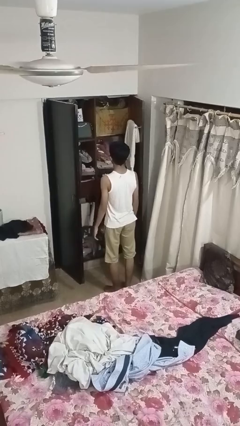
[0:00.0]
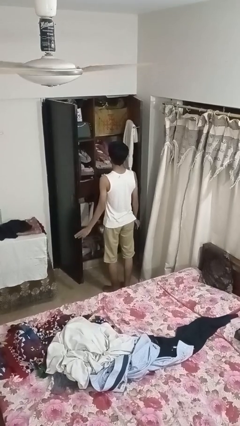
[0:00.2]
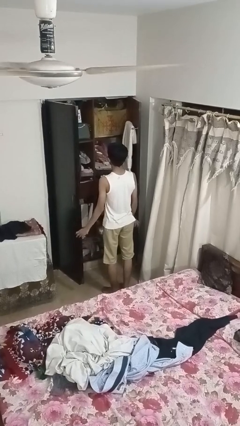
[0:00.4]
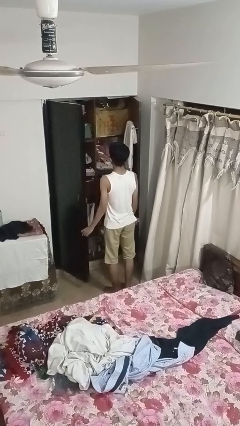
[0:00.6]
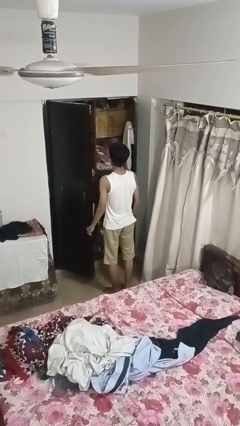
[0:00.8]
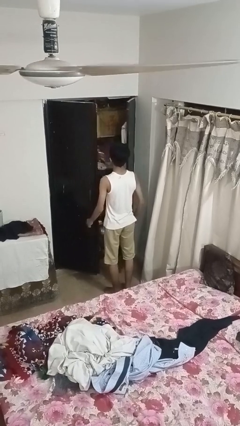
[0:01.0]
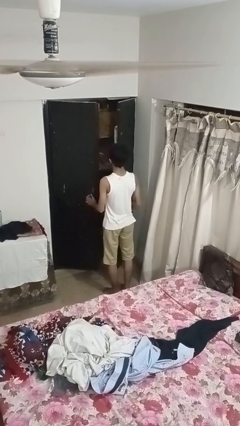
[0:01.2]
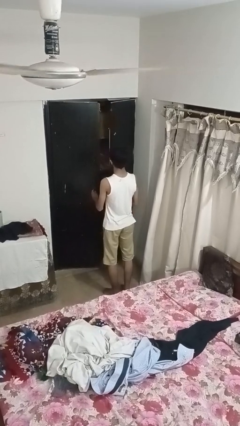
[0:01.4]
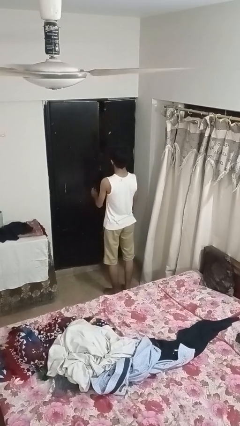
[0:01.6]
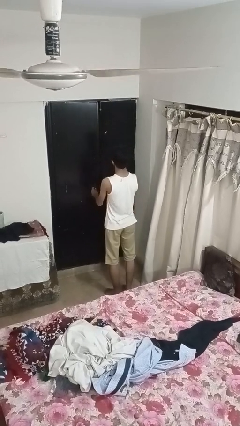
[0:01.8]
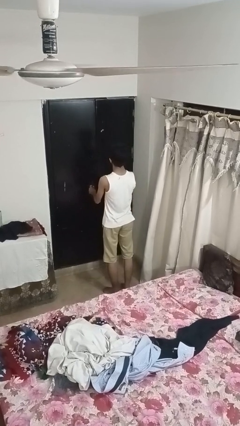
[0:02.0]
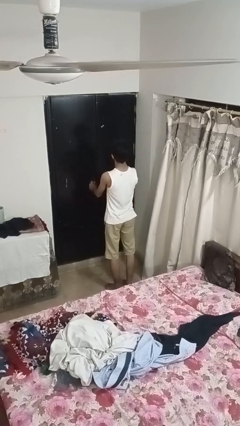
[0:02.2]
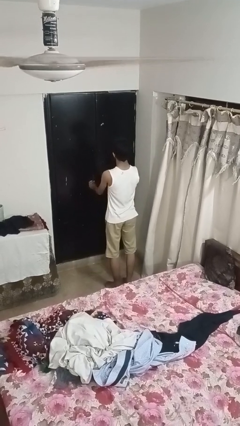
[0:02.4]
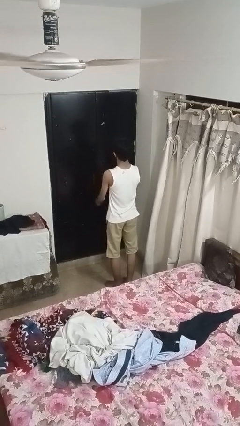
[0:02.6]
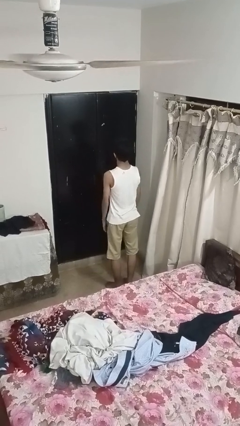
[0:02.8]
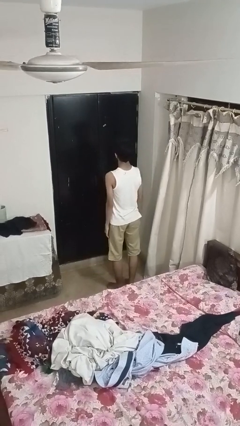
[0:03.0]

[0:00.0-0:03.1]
person closes closet door

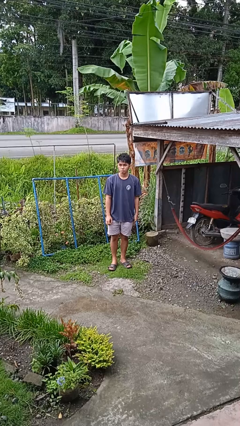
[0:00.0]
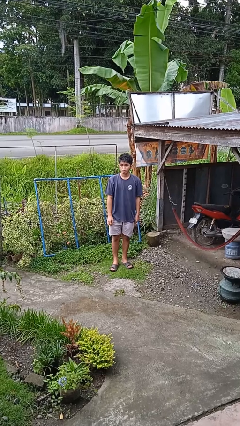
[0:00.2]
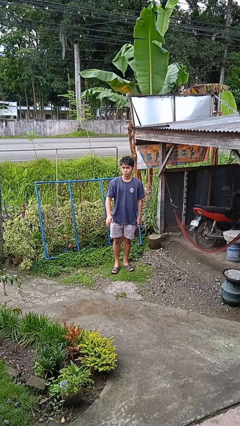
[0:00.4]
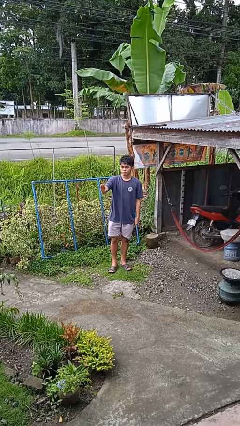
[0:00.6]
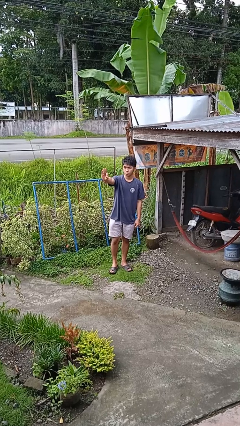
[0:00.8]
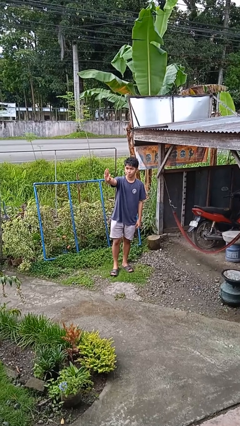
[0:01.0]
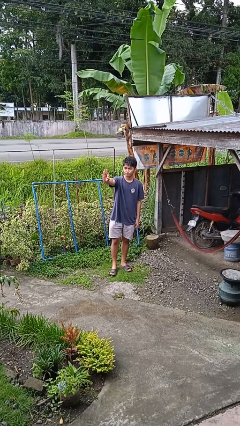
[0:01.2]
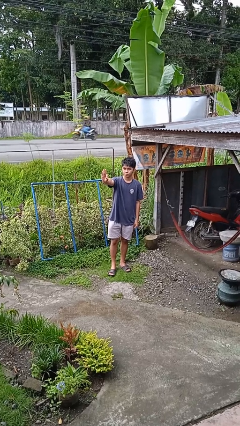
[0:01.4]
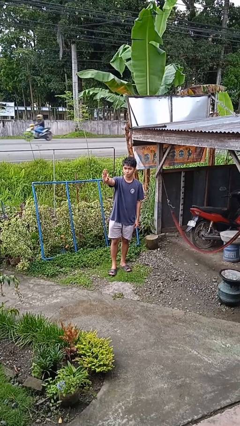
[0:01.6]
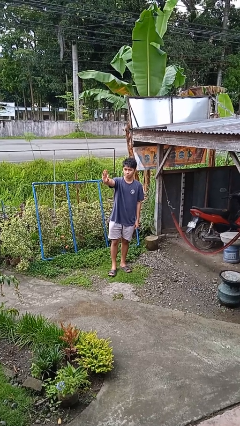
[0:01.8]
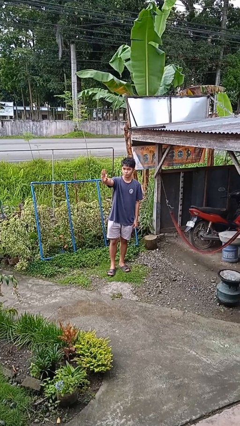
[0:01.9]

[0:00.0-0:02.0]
person gestures number three

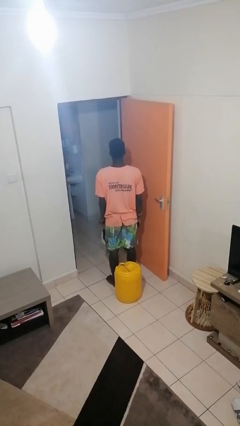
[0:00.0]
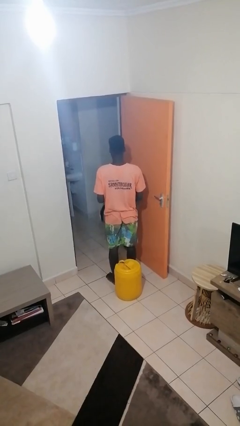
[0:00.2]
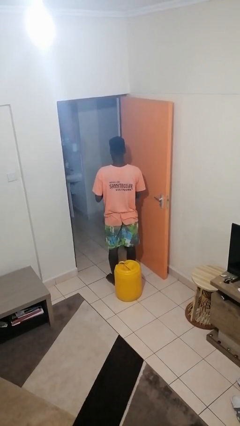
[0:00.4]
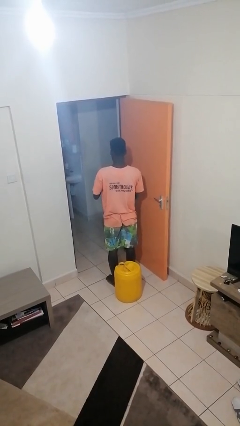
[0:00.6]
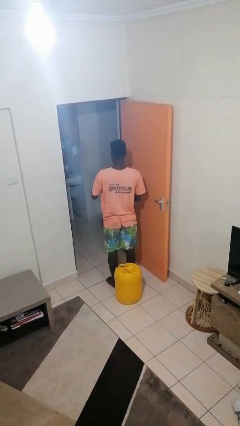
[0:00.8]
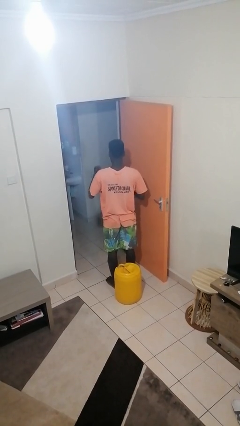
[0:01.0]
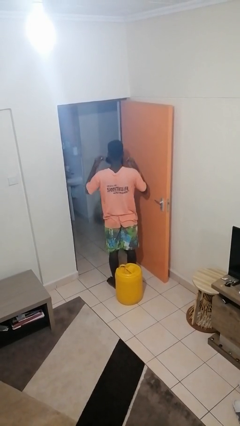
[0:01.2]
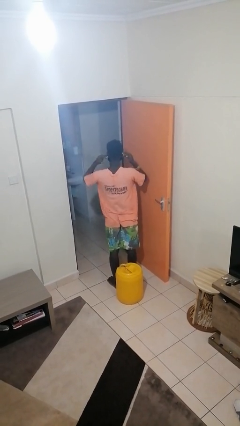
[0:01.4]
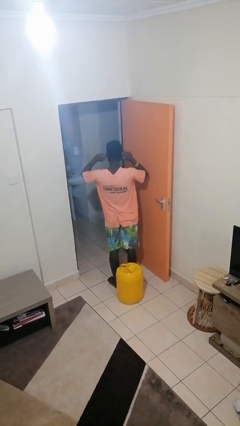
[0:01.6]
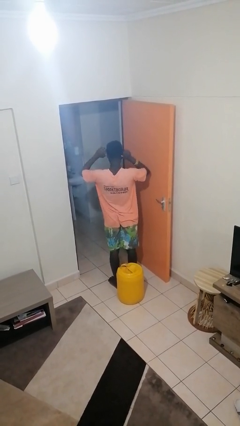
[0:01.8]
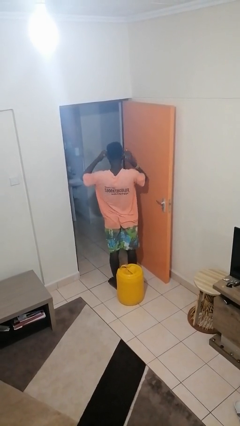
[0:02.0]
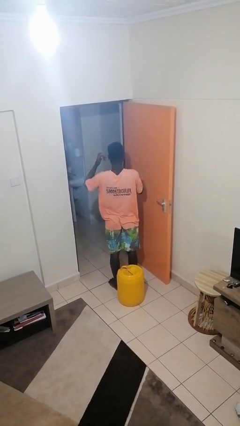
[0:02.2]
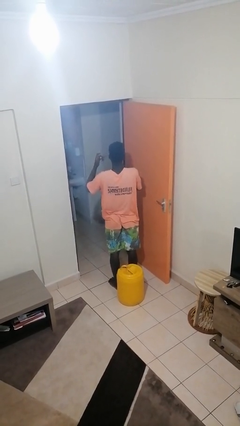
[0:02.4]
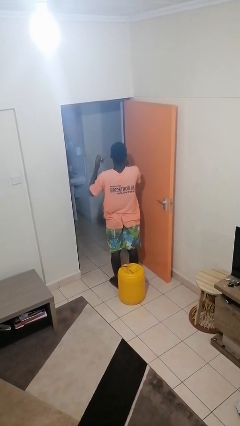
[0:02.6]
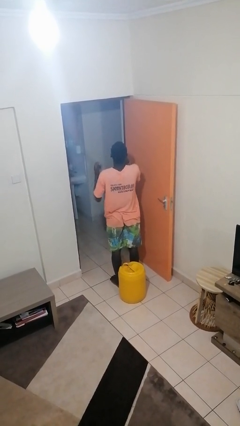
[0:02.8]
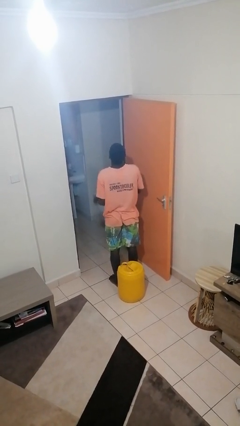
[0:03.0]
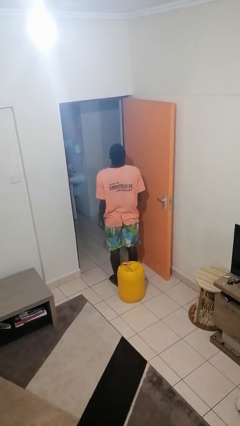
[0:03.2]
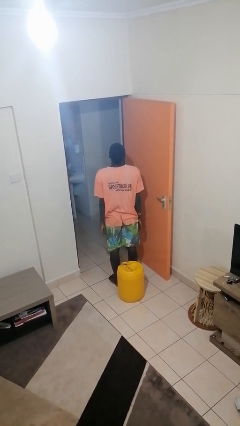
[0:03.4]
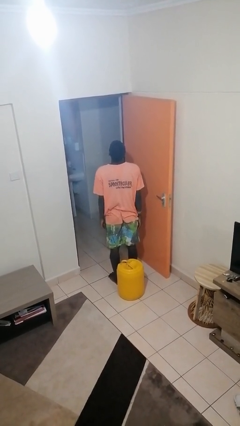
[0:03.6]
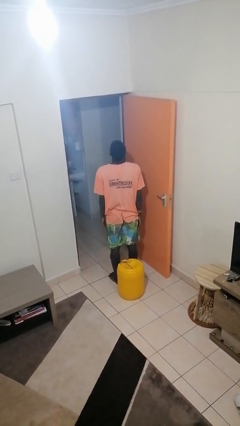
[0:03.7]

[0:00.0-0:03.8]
person puts on facemask

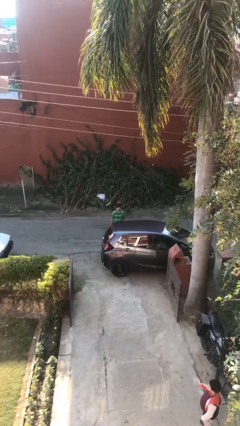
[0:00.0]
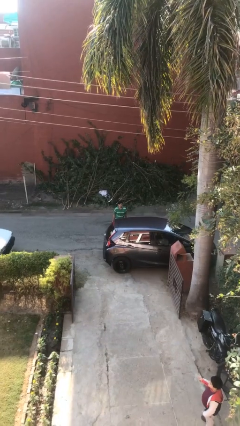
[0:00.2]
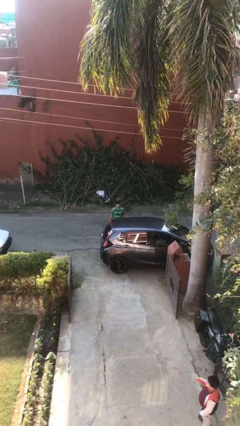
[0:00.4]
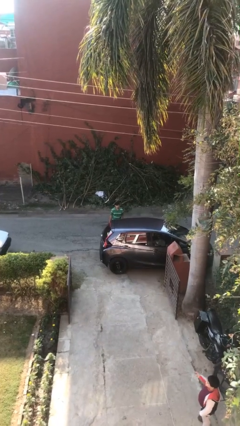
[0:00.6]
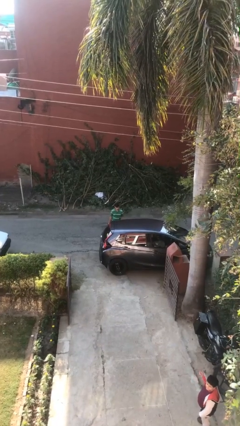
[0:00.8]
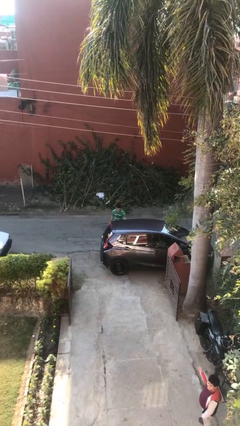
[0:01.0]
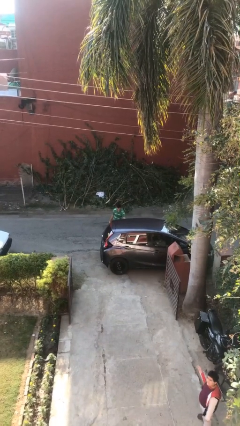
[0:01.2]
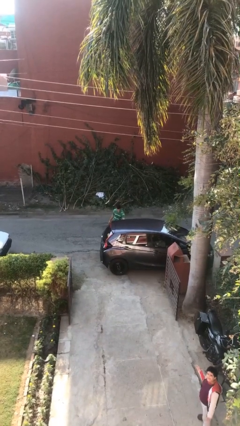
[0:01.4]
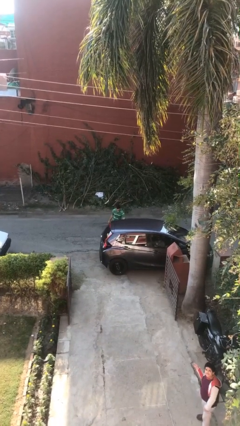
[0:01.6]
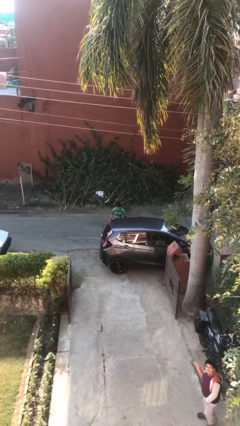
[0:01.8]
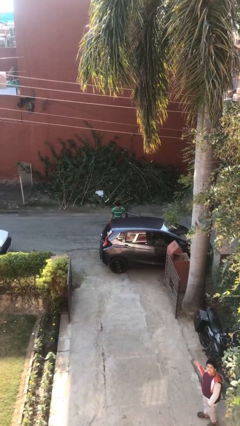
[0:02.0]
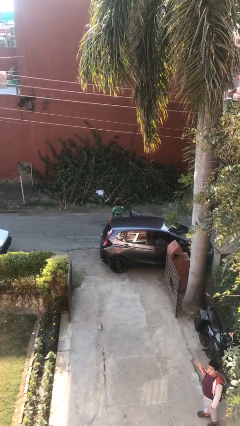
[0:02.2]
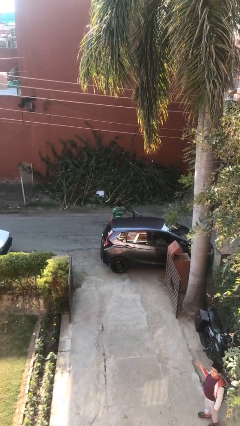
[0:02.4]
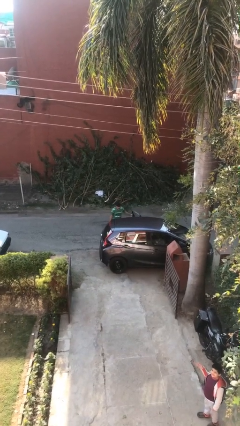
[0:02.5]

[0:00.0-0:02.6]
person opens car door

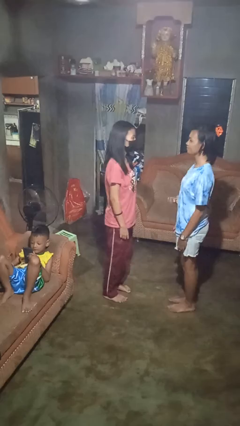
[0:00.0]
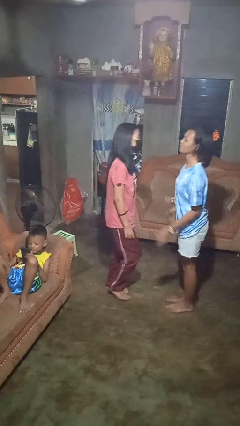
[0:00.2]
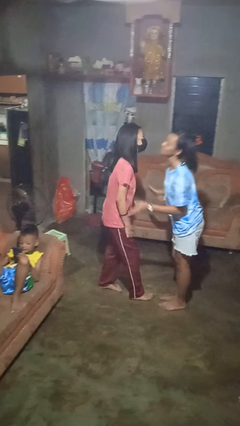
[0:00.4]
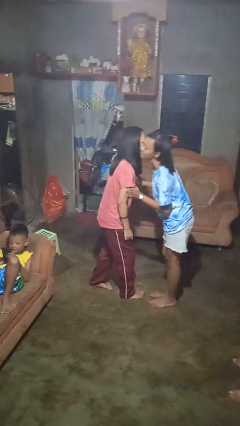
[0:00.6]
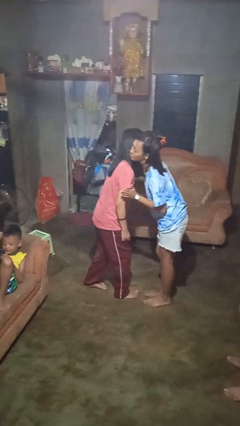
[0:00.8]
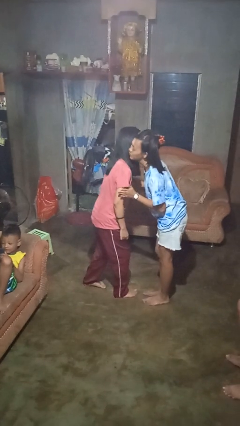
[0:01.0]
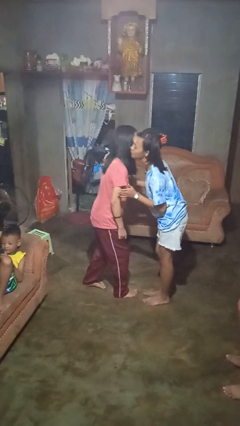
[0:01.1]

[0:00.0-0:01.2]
person kisses cheek of person

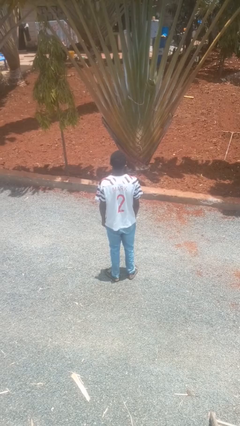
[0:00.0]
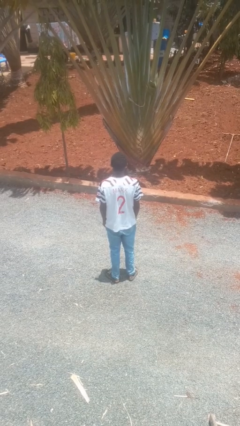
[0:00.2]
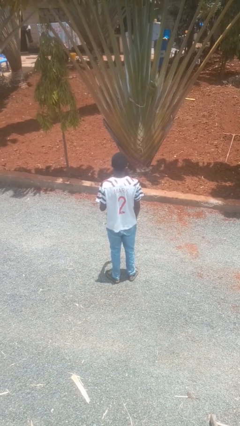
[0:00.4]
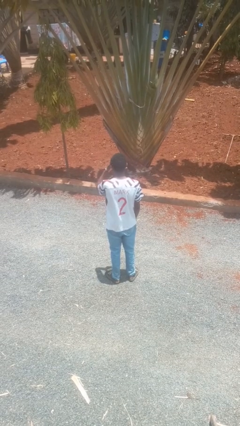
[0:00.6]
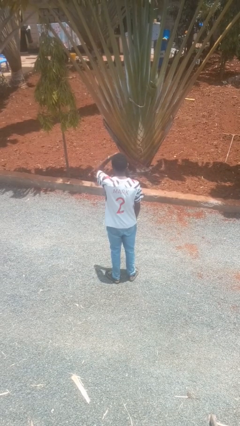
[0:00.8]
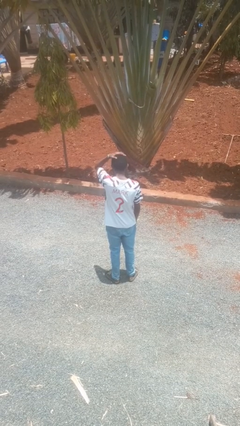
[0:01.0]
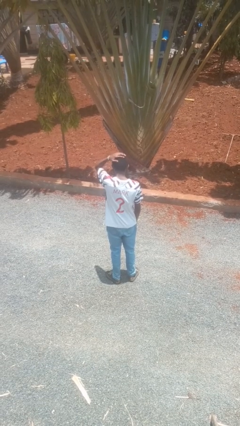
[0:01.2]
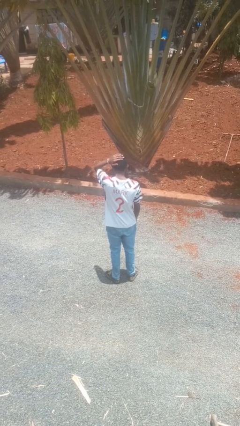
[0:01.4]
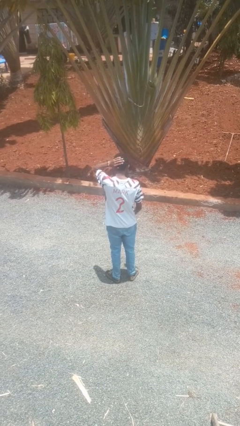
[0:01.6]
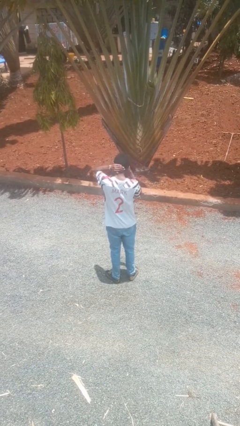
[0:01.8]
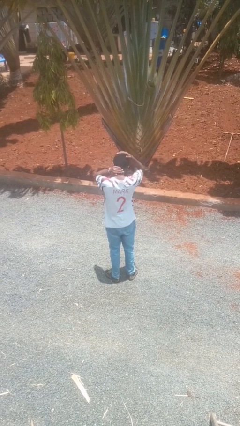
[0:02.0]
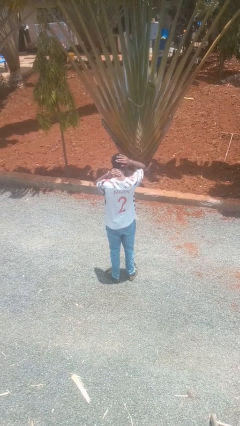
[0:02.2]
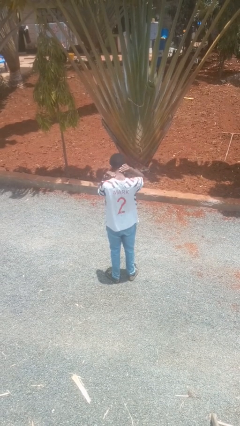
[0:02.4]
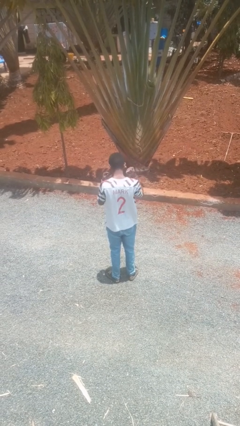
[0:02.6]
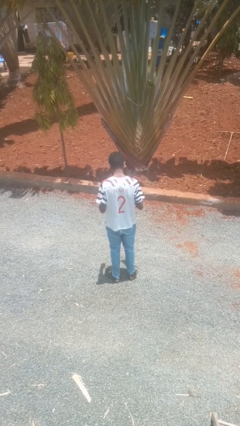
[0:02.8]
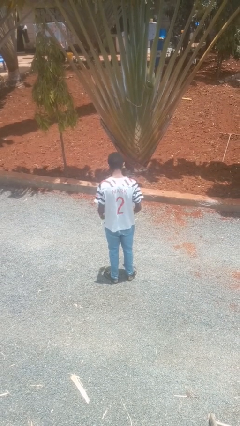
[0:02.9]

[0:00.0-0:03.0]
person strokes hair

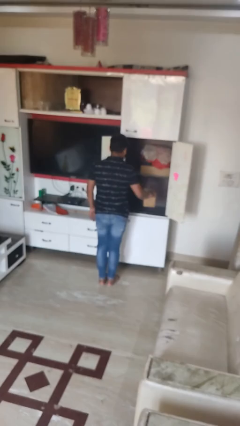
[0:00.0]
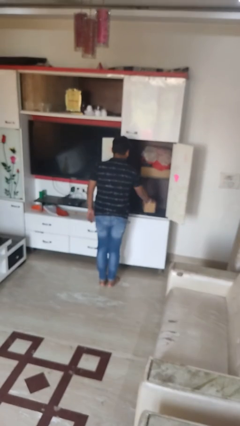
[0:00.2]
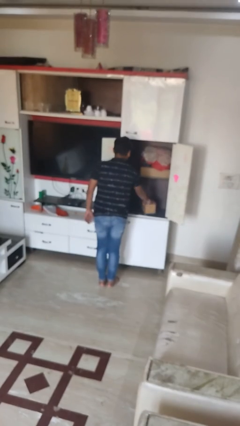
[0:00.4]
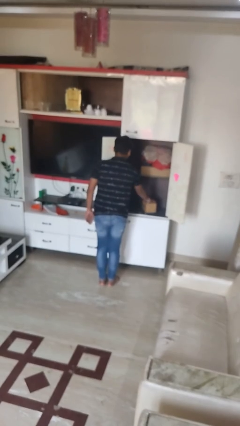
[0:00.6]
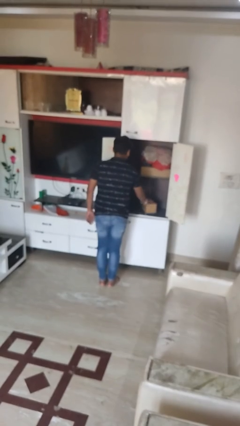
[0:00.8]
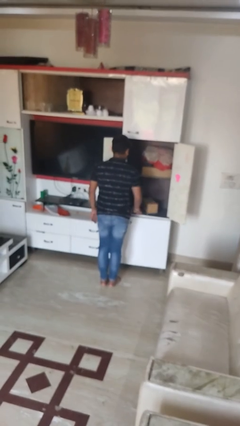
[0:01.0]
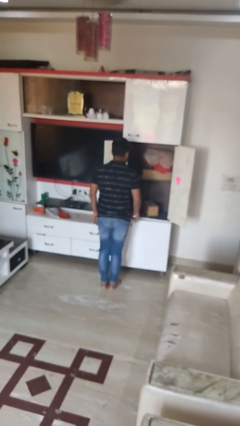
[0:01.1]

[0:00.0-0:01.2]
person puts down object into cabinet

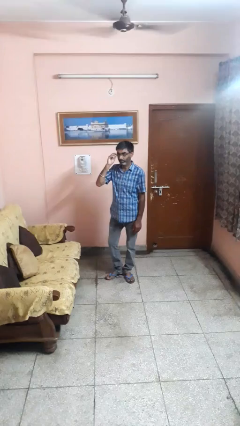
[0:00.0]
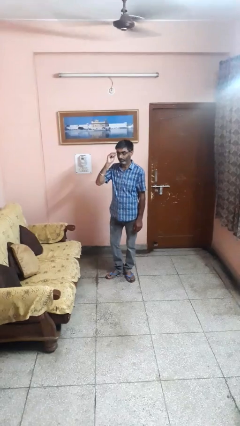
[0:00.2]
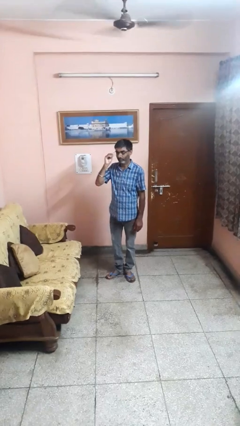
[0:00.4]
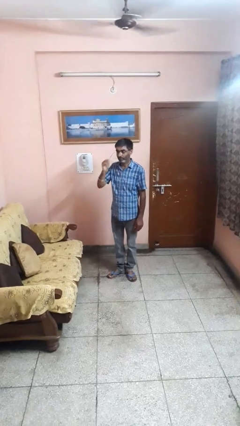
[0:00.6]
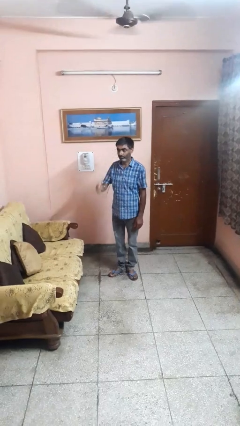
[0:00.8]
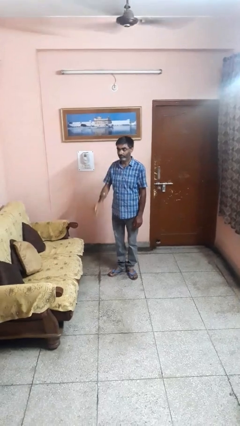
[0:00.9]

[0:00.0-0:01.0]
person takes off glasses
